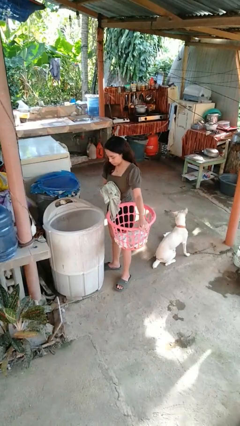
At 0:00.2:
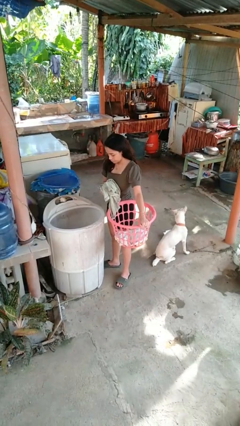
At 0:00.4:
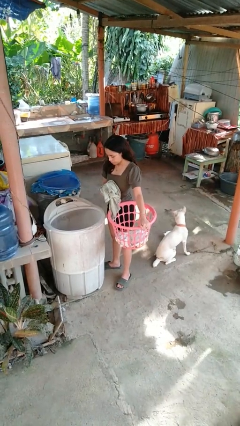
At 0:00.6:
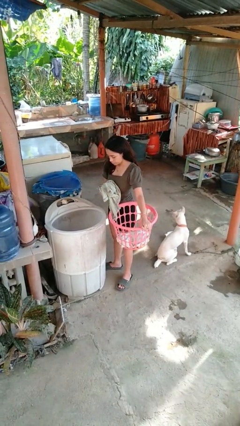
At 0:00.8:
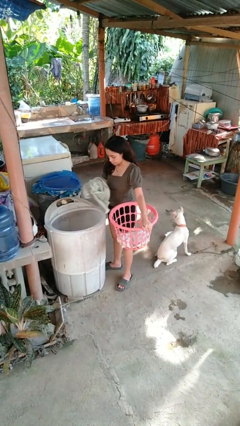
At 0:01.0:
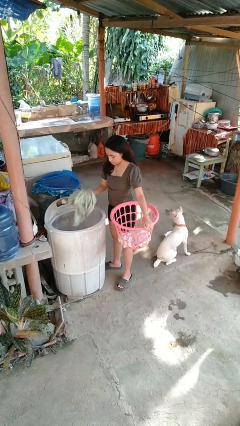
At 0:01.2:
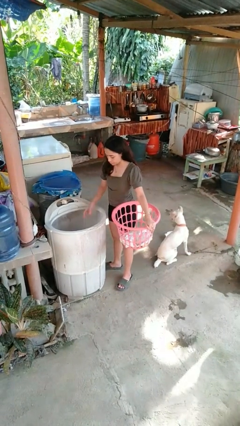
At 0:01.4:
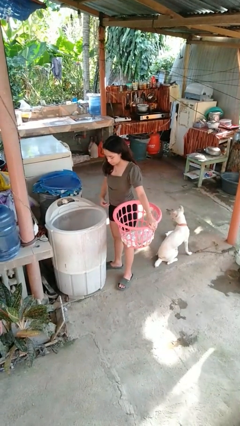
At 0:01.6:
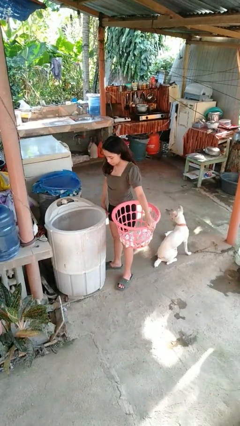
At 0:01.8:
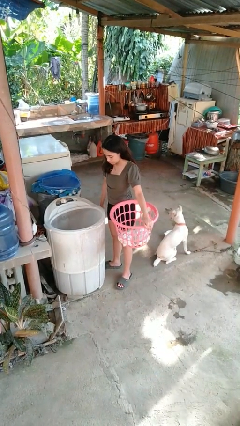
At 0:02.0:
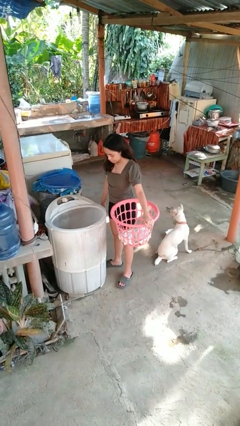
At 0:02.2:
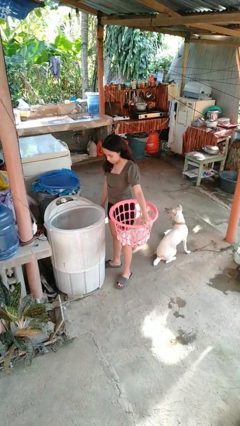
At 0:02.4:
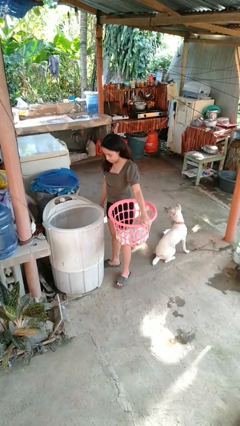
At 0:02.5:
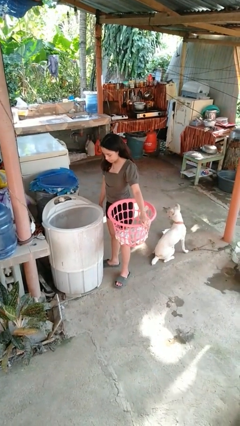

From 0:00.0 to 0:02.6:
person loads dryer

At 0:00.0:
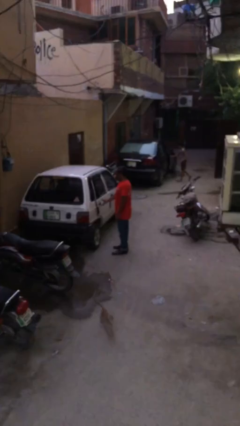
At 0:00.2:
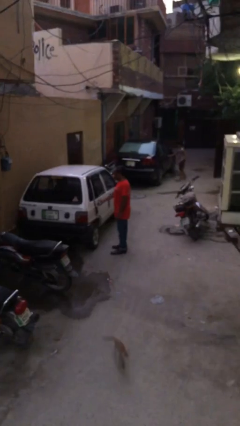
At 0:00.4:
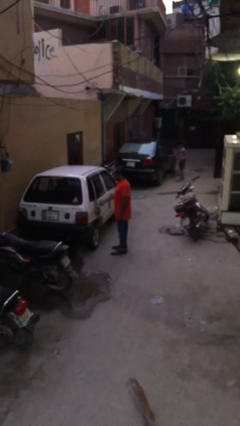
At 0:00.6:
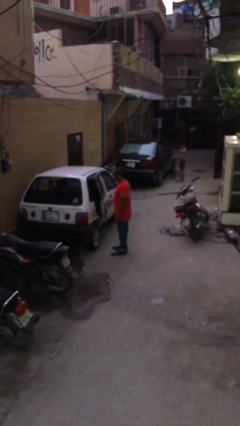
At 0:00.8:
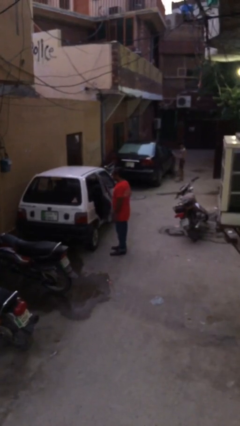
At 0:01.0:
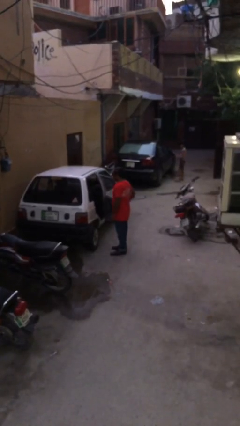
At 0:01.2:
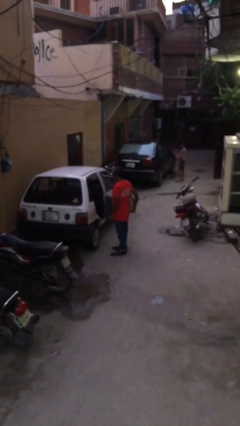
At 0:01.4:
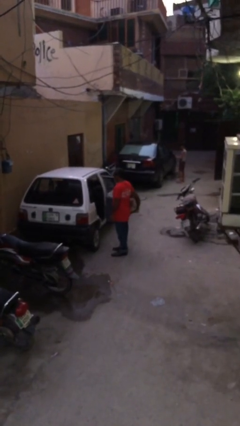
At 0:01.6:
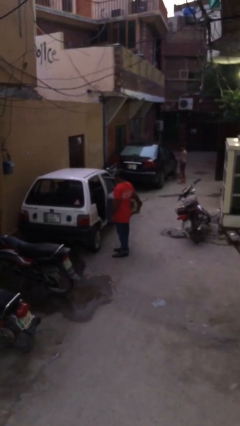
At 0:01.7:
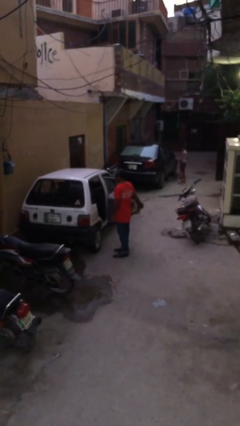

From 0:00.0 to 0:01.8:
person opens car door

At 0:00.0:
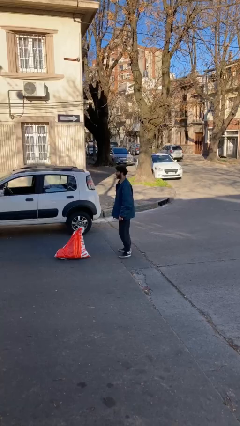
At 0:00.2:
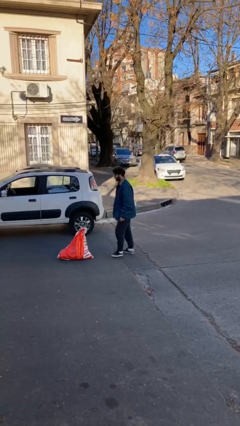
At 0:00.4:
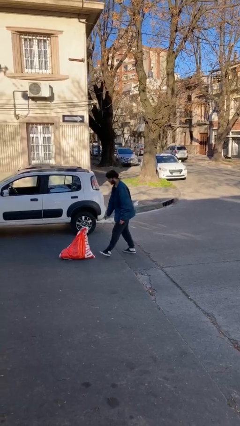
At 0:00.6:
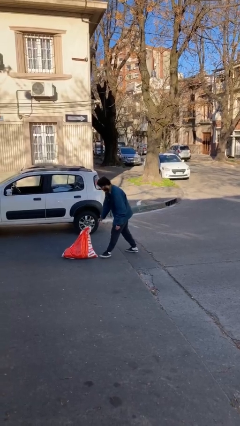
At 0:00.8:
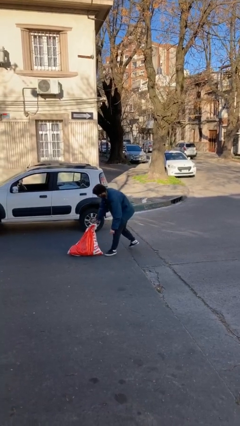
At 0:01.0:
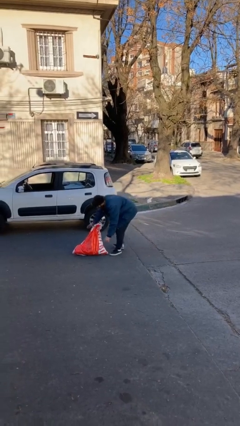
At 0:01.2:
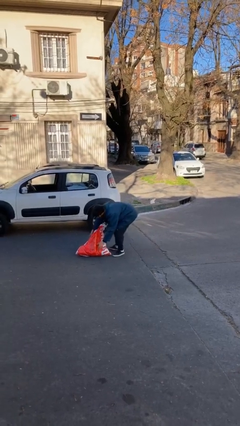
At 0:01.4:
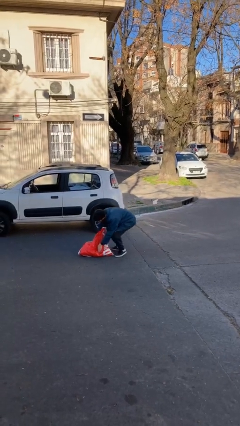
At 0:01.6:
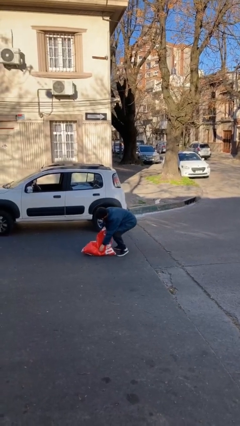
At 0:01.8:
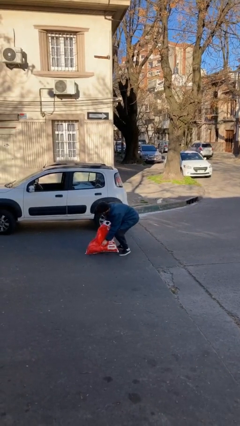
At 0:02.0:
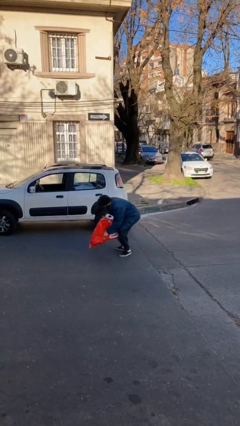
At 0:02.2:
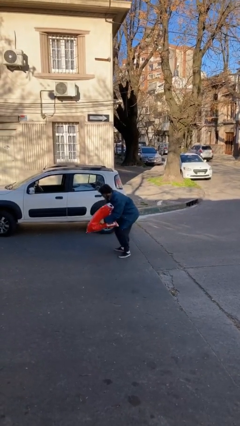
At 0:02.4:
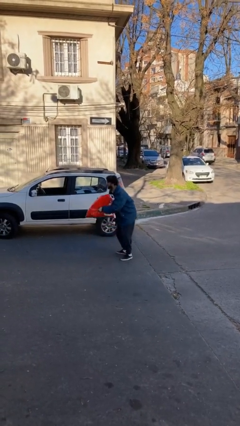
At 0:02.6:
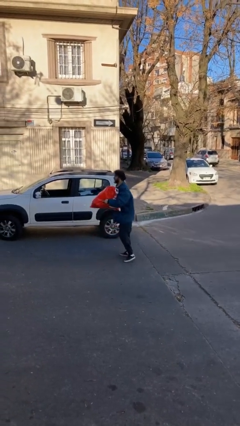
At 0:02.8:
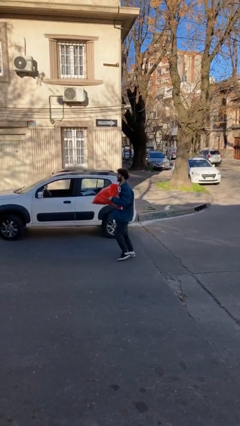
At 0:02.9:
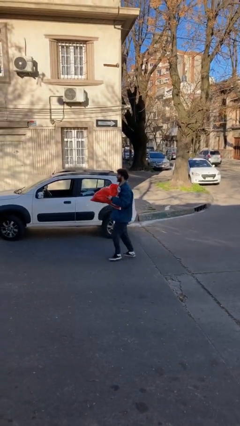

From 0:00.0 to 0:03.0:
person picks up object from floor

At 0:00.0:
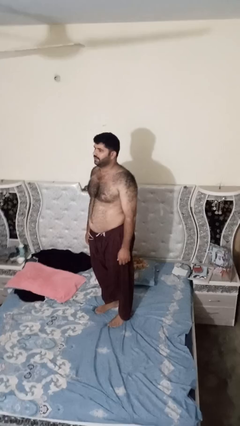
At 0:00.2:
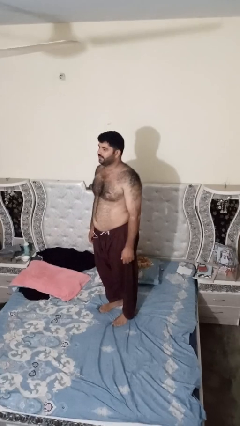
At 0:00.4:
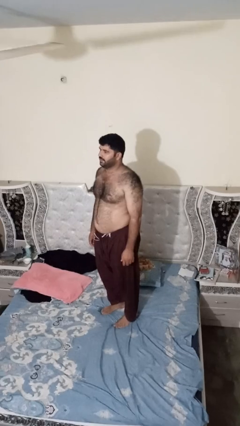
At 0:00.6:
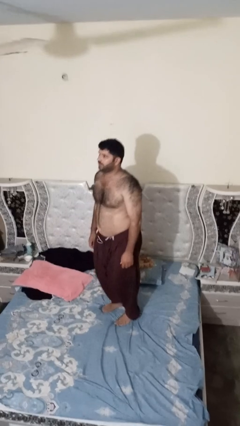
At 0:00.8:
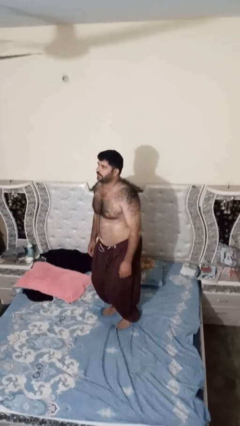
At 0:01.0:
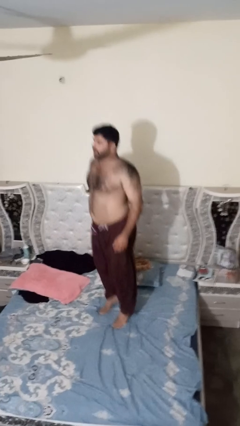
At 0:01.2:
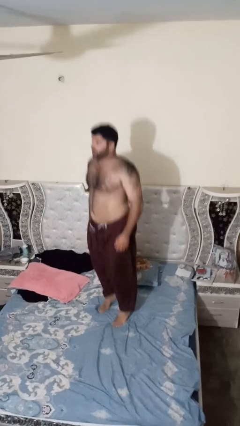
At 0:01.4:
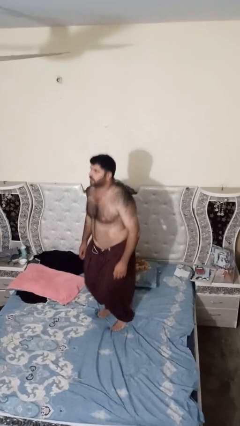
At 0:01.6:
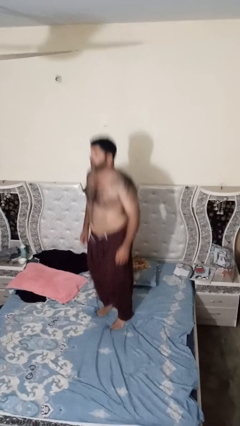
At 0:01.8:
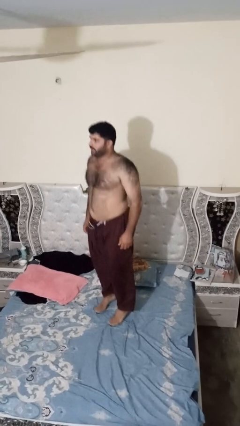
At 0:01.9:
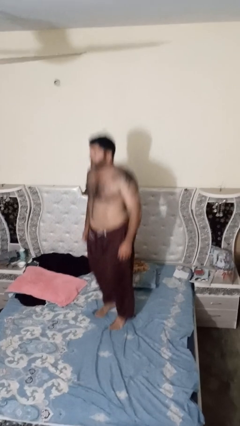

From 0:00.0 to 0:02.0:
person jumps on bed

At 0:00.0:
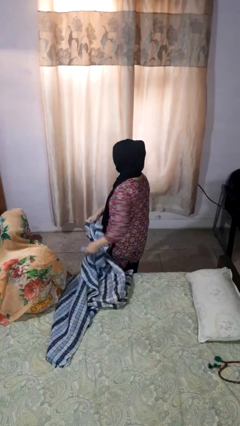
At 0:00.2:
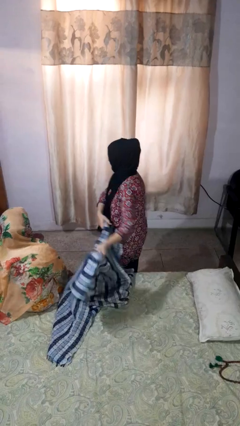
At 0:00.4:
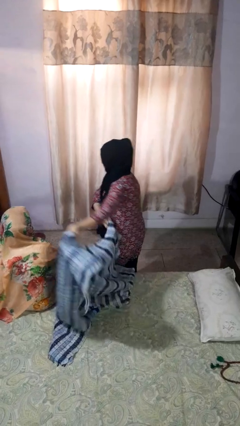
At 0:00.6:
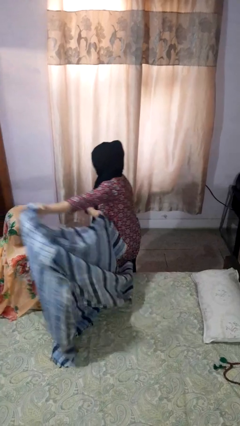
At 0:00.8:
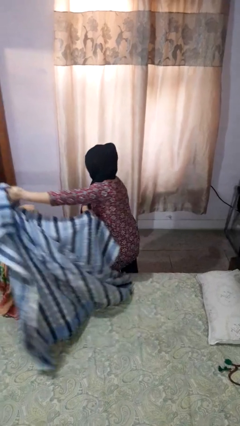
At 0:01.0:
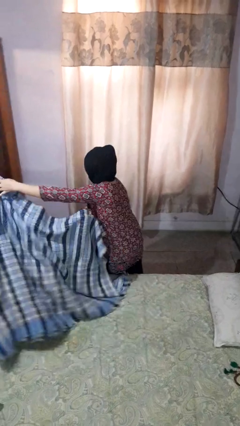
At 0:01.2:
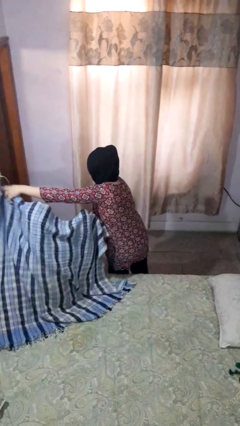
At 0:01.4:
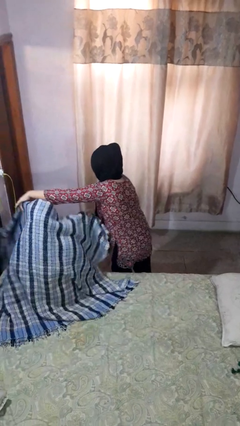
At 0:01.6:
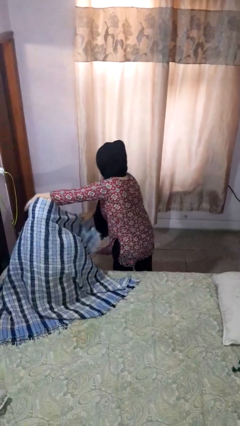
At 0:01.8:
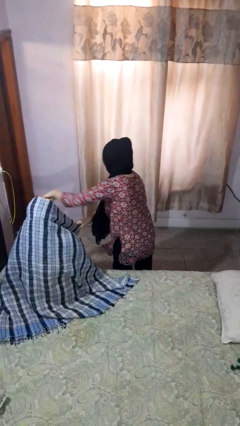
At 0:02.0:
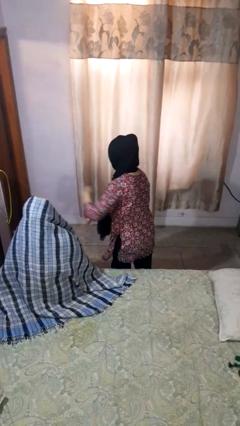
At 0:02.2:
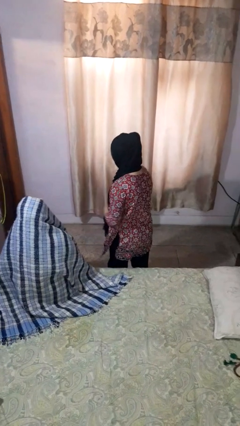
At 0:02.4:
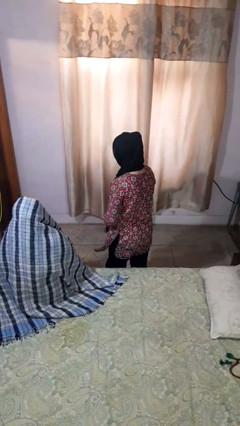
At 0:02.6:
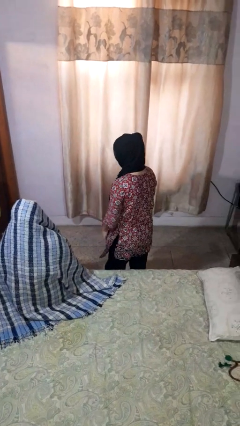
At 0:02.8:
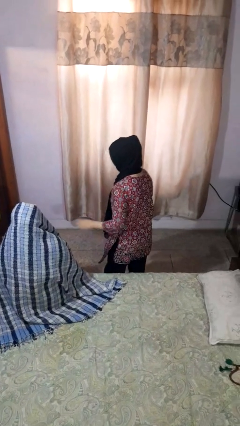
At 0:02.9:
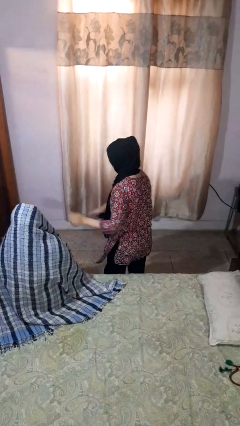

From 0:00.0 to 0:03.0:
person covers friend with blanket

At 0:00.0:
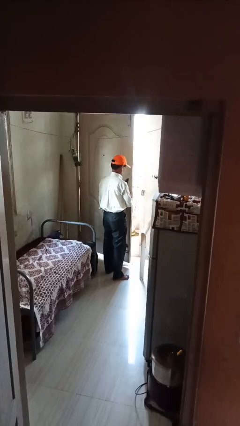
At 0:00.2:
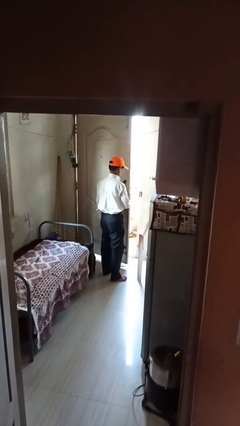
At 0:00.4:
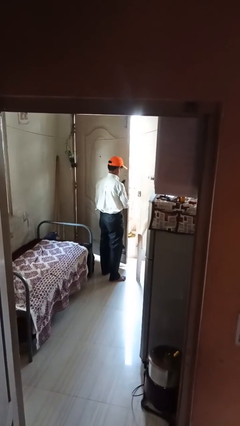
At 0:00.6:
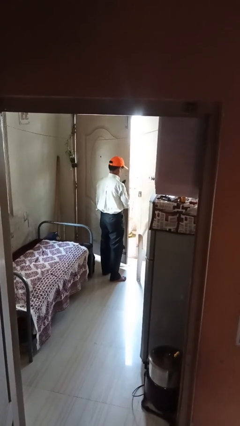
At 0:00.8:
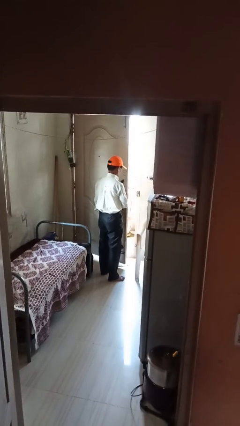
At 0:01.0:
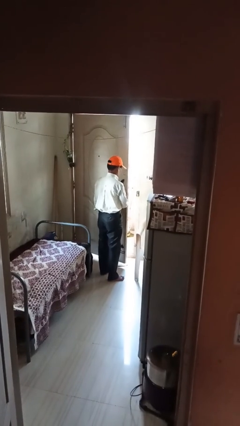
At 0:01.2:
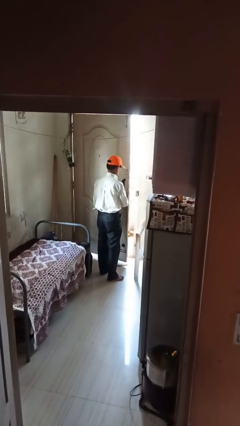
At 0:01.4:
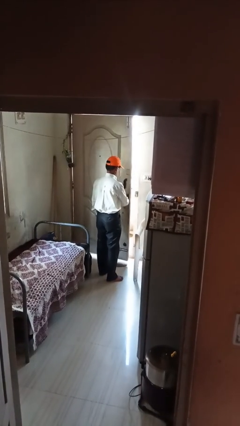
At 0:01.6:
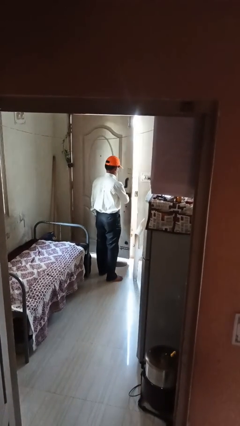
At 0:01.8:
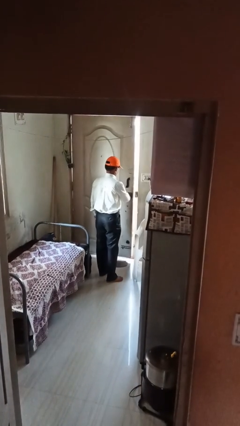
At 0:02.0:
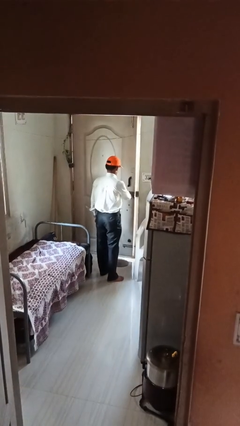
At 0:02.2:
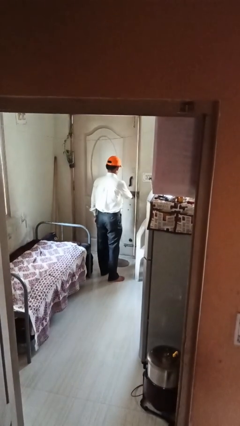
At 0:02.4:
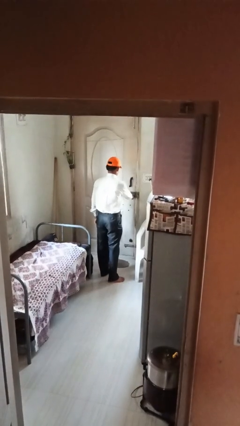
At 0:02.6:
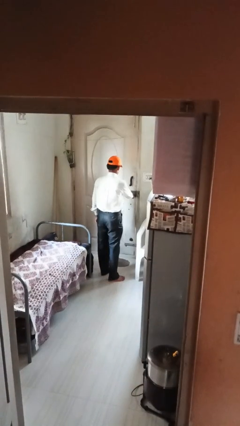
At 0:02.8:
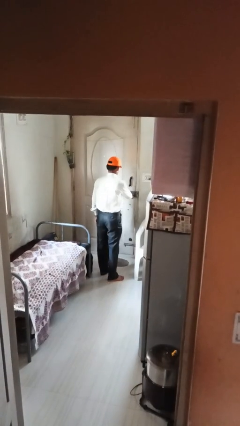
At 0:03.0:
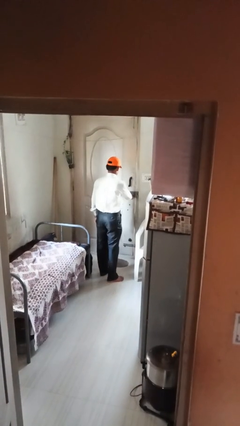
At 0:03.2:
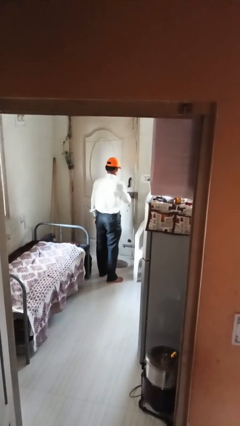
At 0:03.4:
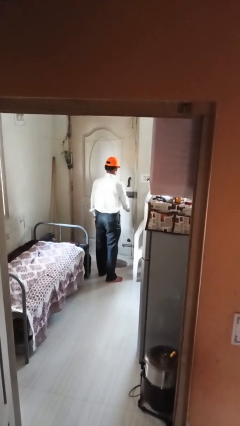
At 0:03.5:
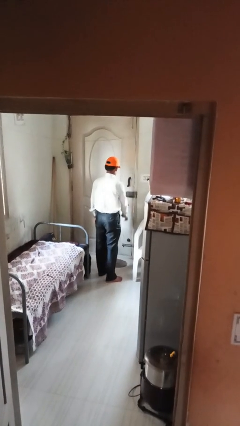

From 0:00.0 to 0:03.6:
person closes facility door

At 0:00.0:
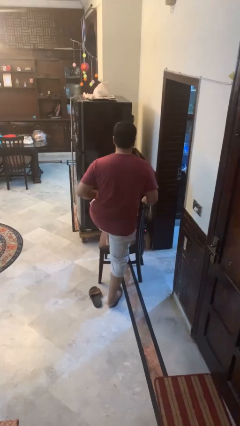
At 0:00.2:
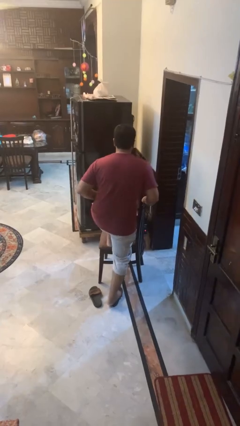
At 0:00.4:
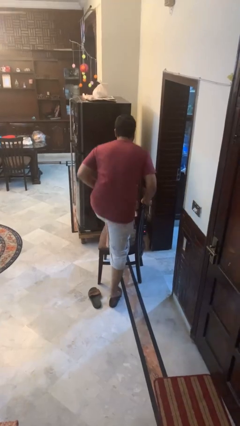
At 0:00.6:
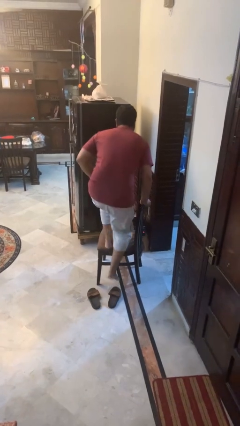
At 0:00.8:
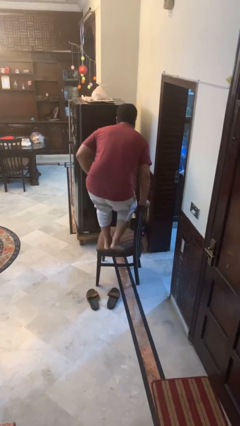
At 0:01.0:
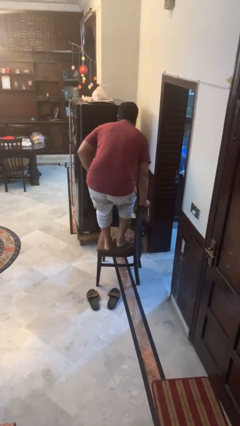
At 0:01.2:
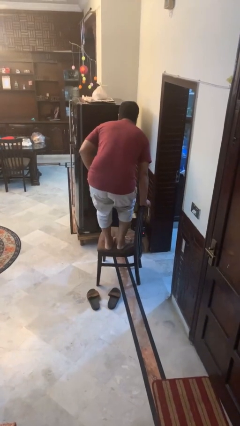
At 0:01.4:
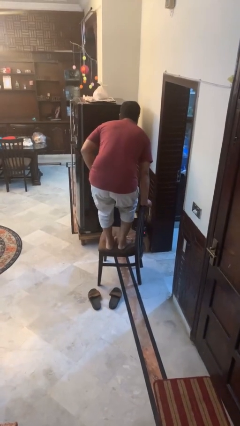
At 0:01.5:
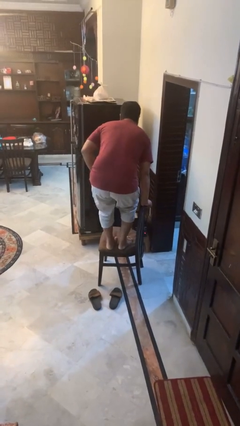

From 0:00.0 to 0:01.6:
person climbs on chair
